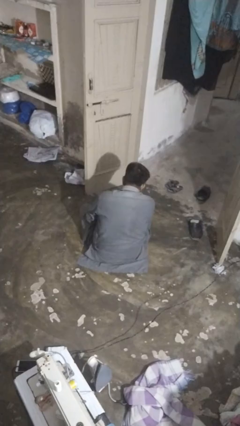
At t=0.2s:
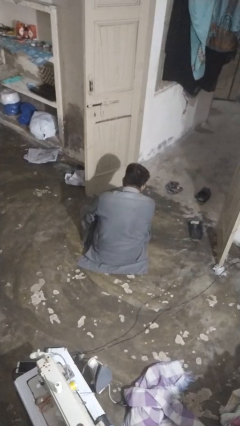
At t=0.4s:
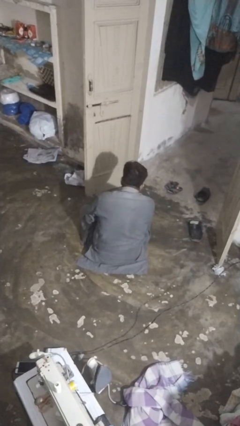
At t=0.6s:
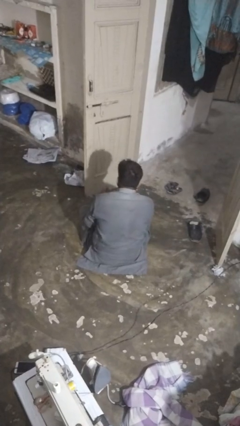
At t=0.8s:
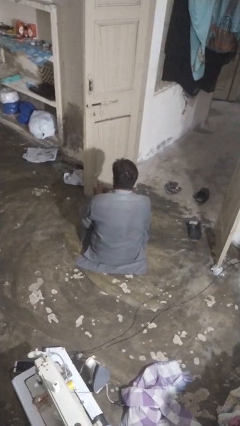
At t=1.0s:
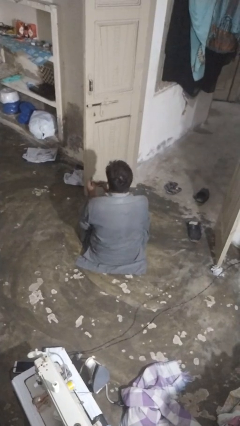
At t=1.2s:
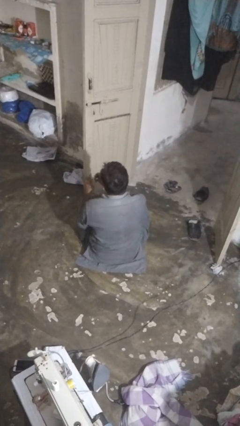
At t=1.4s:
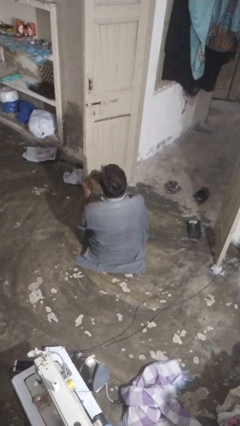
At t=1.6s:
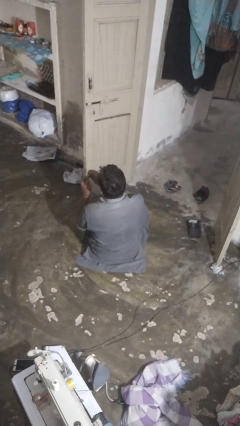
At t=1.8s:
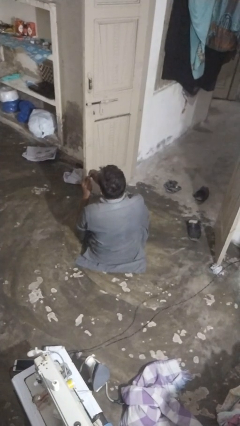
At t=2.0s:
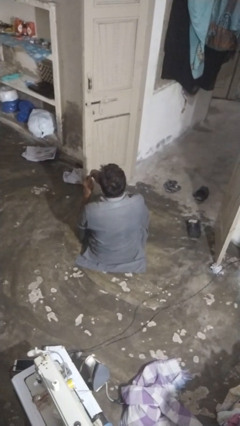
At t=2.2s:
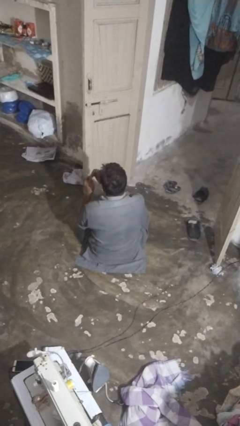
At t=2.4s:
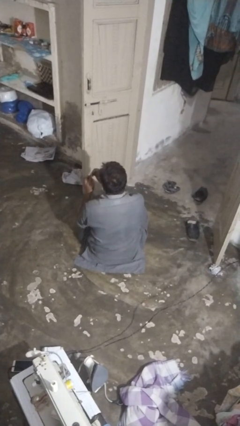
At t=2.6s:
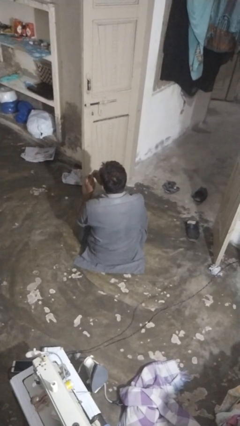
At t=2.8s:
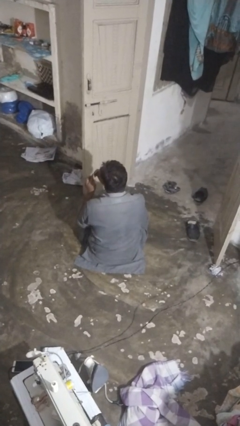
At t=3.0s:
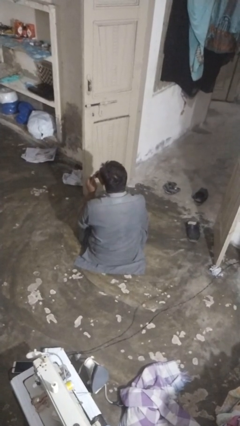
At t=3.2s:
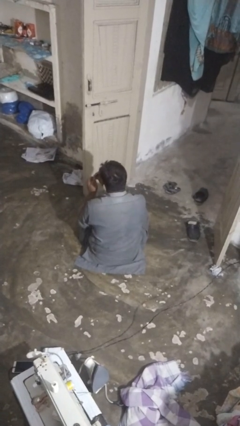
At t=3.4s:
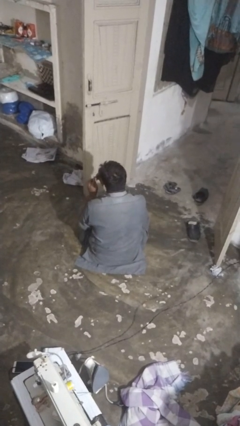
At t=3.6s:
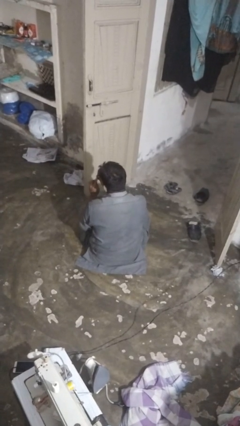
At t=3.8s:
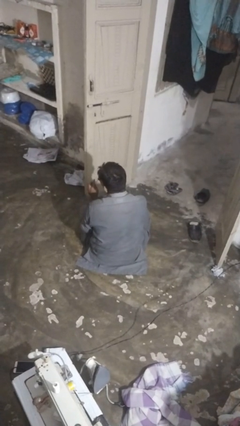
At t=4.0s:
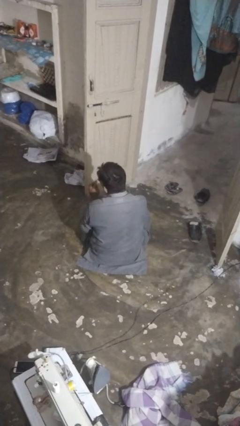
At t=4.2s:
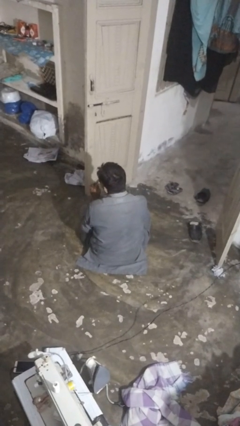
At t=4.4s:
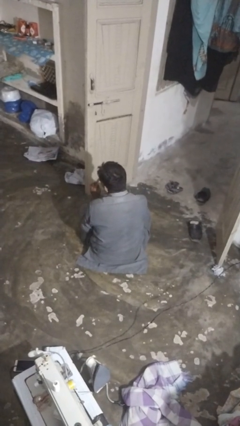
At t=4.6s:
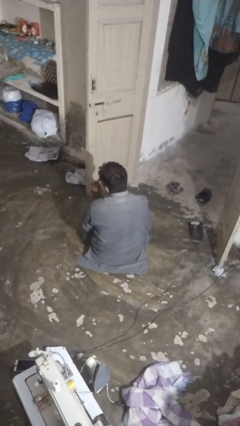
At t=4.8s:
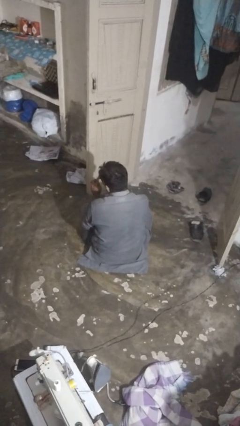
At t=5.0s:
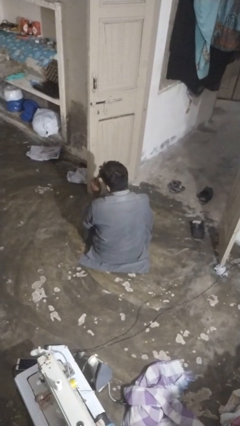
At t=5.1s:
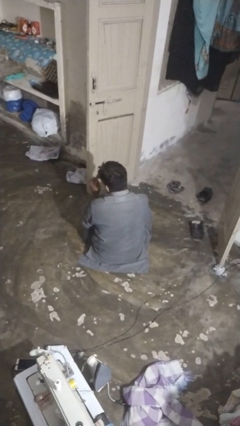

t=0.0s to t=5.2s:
person files fingernails

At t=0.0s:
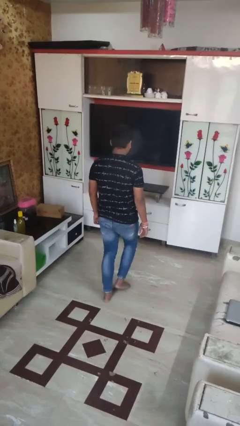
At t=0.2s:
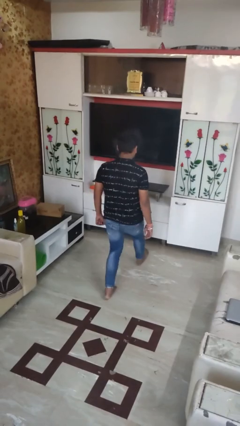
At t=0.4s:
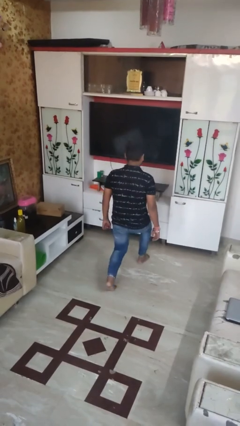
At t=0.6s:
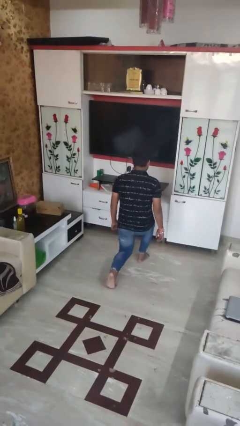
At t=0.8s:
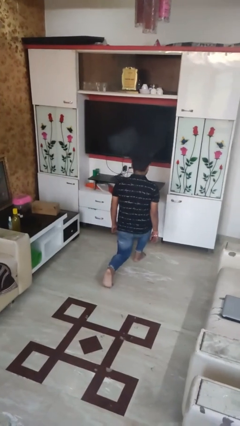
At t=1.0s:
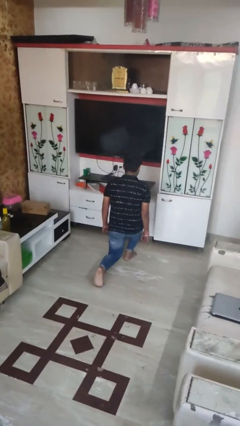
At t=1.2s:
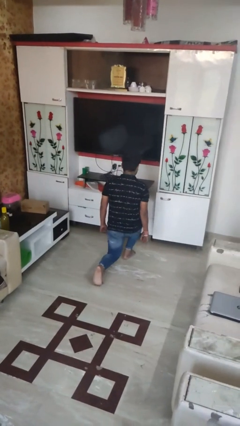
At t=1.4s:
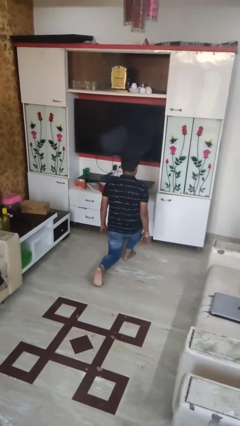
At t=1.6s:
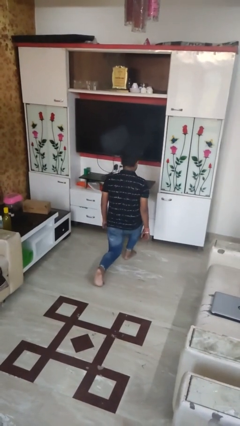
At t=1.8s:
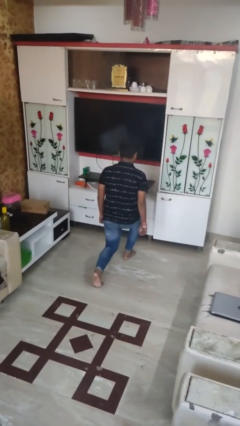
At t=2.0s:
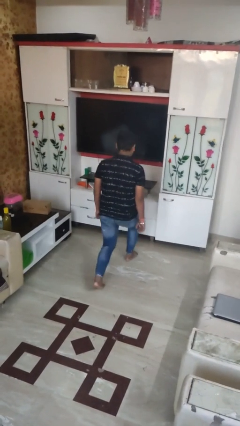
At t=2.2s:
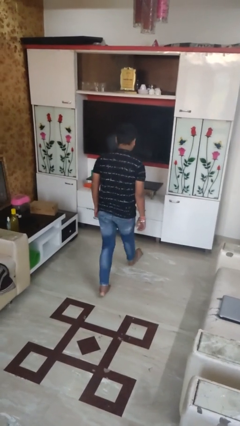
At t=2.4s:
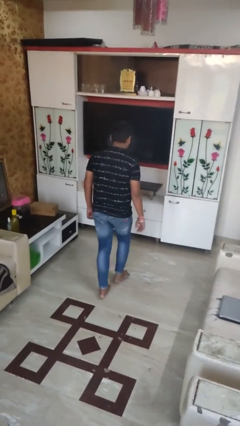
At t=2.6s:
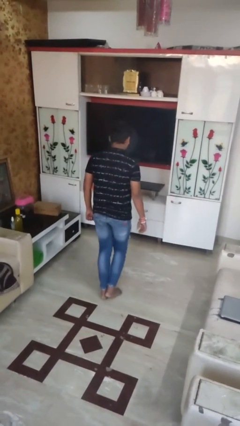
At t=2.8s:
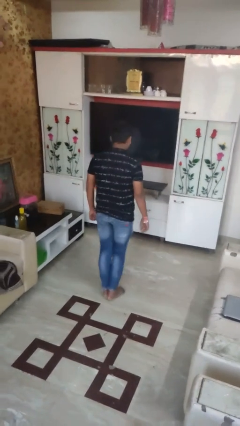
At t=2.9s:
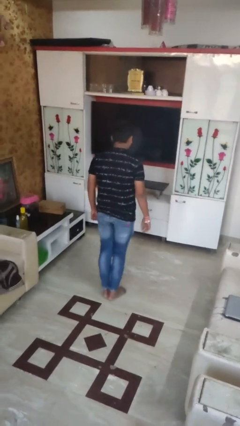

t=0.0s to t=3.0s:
person exercises with lunges

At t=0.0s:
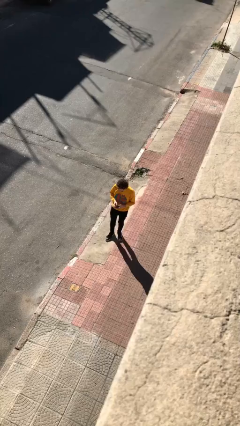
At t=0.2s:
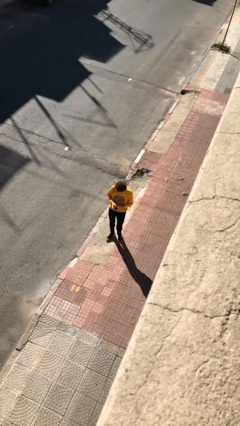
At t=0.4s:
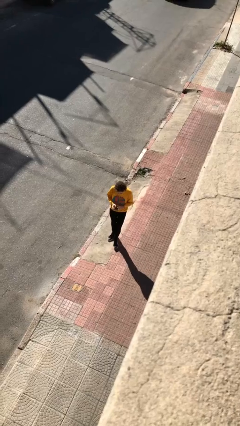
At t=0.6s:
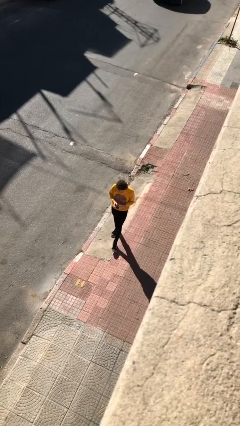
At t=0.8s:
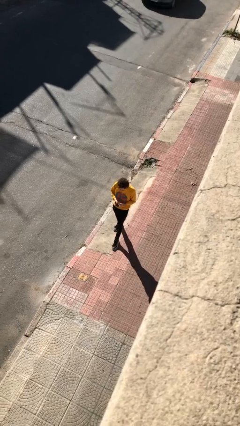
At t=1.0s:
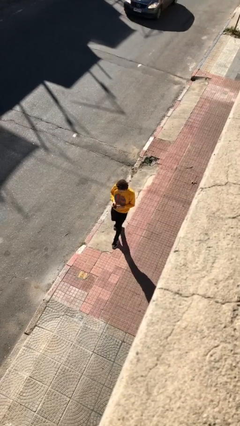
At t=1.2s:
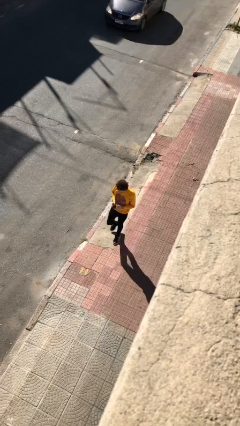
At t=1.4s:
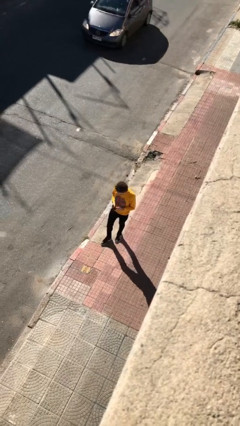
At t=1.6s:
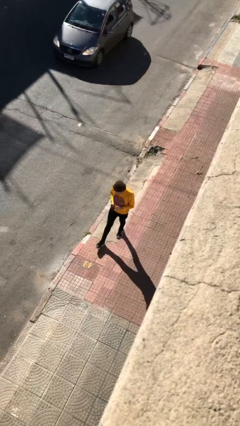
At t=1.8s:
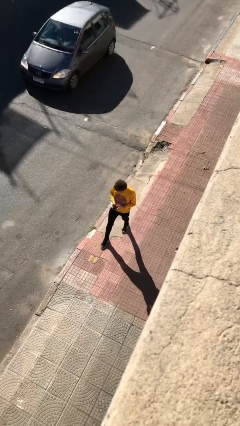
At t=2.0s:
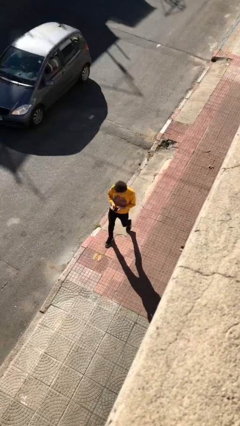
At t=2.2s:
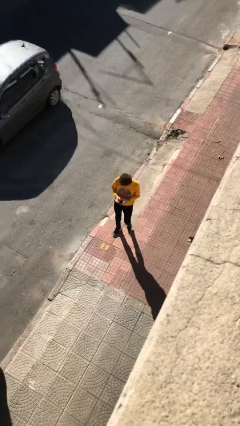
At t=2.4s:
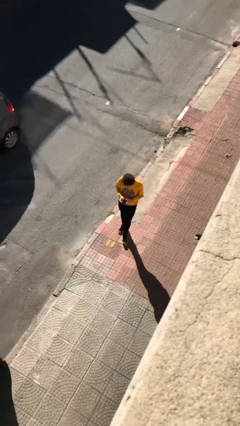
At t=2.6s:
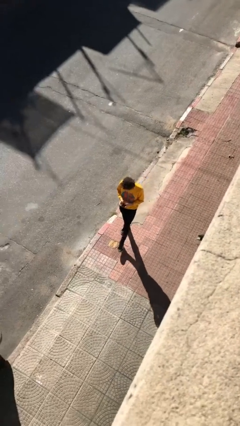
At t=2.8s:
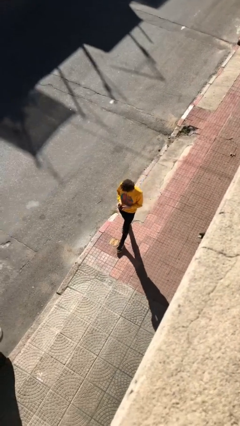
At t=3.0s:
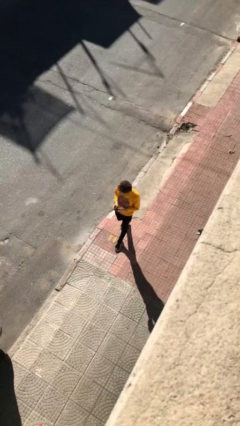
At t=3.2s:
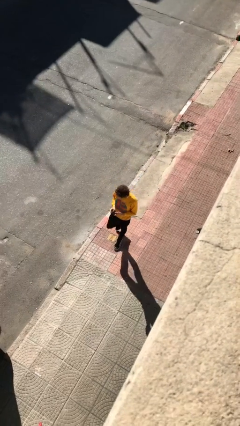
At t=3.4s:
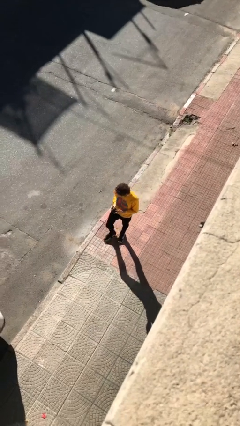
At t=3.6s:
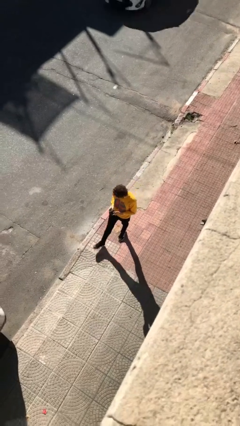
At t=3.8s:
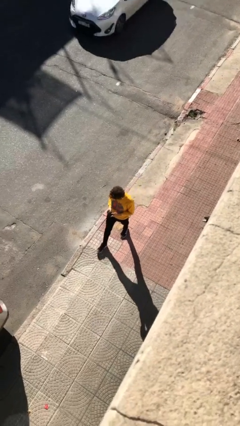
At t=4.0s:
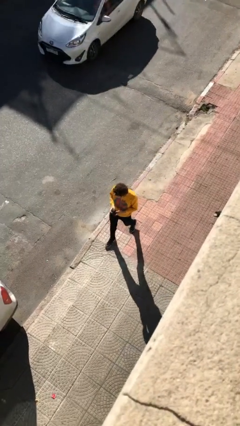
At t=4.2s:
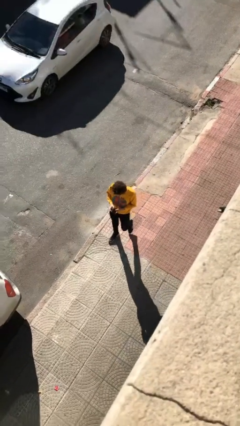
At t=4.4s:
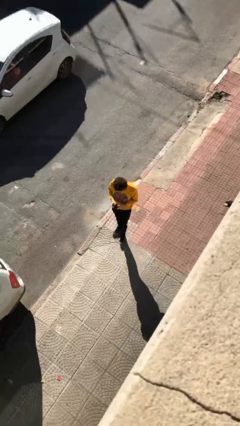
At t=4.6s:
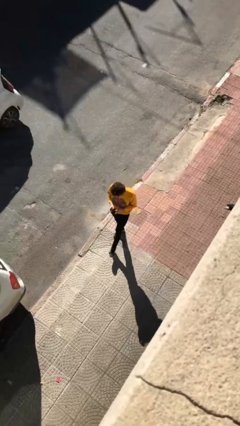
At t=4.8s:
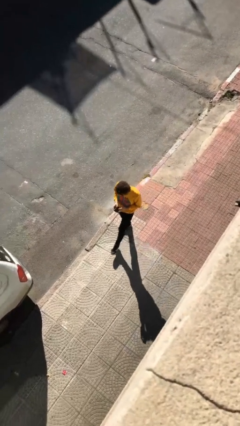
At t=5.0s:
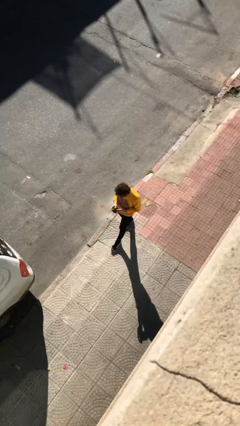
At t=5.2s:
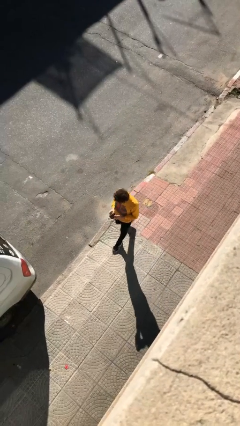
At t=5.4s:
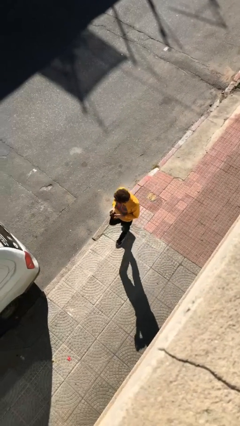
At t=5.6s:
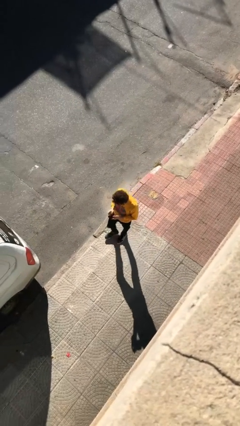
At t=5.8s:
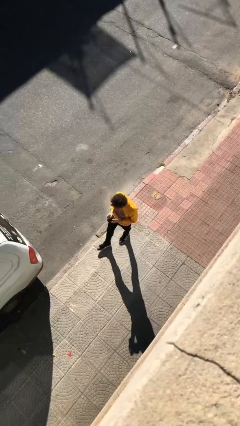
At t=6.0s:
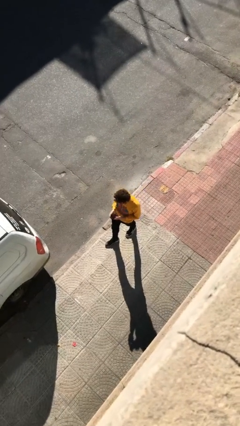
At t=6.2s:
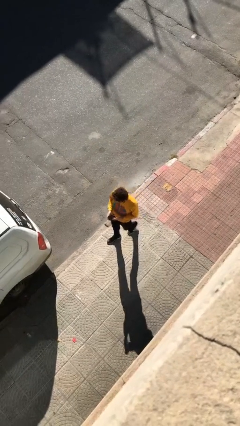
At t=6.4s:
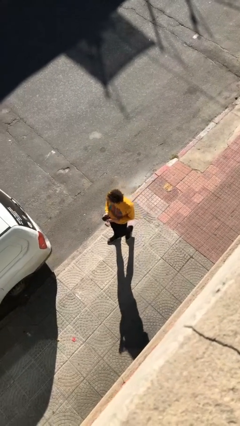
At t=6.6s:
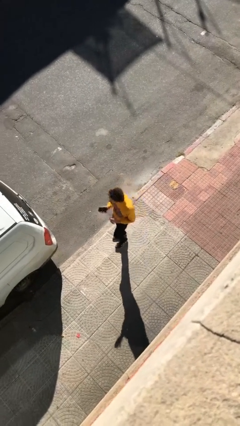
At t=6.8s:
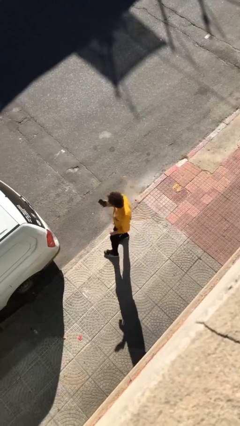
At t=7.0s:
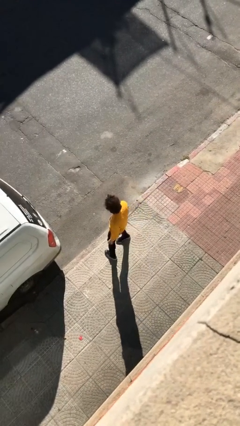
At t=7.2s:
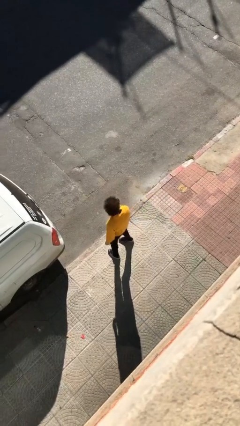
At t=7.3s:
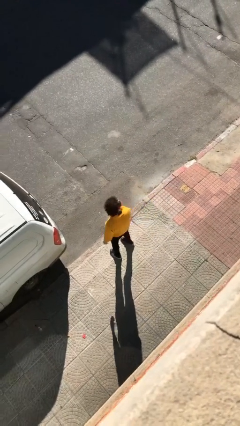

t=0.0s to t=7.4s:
person texts on phone

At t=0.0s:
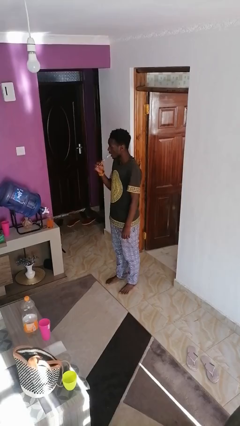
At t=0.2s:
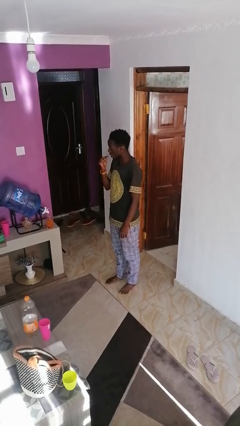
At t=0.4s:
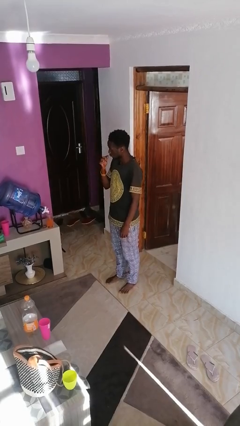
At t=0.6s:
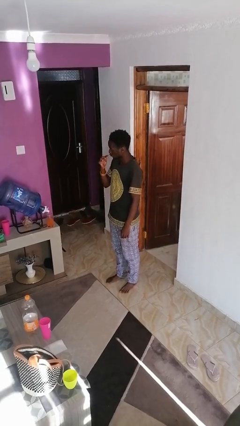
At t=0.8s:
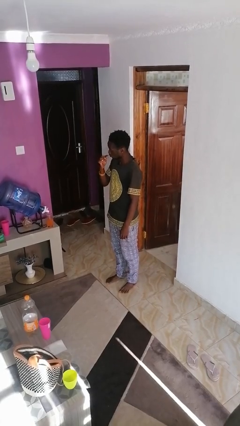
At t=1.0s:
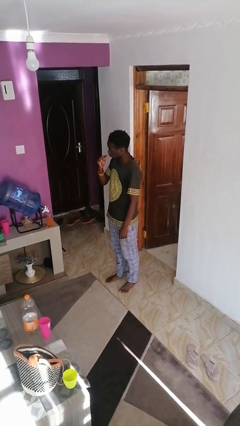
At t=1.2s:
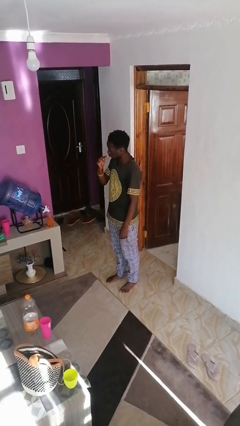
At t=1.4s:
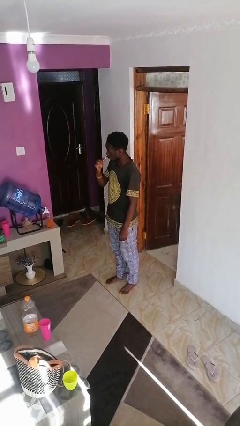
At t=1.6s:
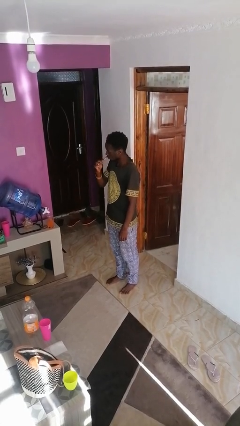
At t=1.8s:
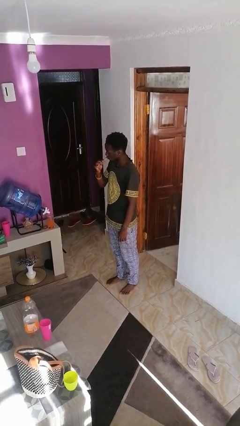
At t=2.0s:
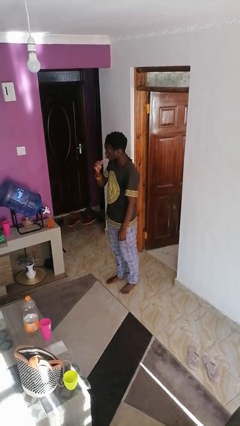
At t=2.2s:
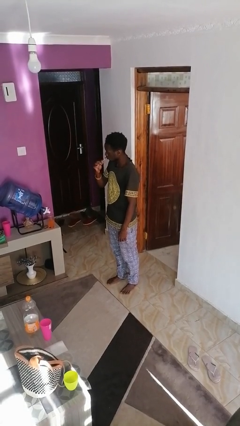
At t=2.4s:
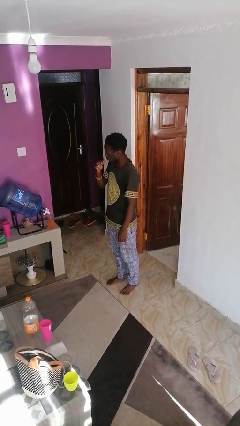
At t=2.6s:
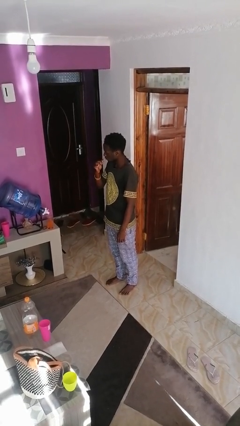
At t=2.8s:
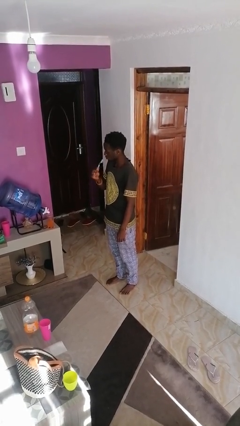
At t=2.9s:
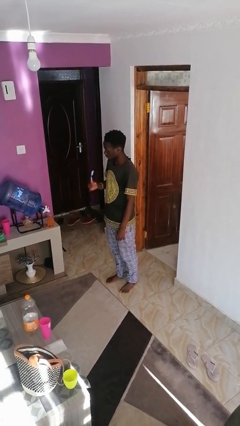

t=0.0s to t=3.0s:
person brushes teeth
